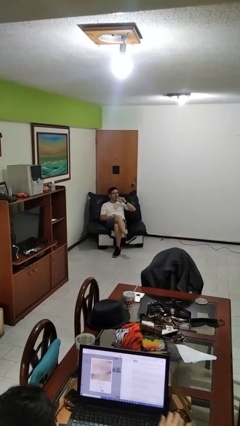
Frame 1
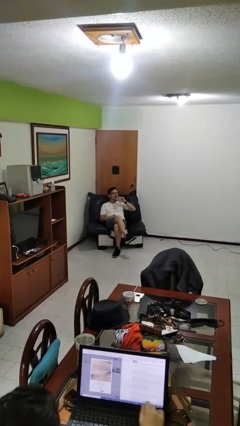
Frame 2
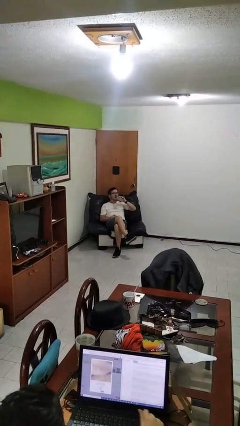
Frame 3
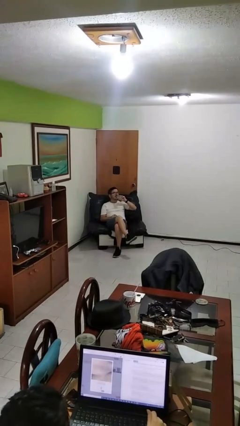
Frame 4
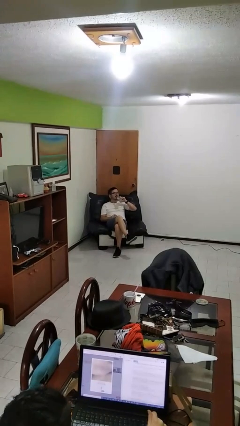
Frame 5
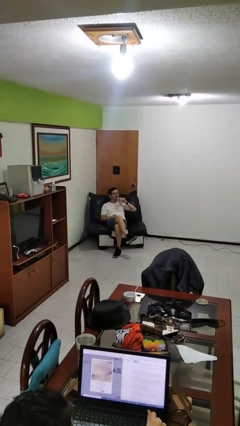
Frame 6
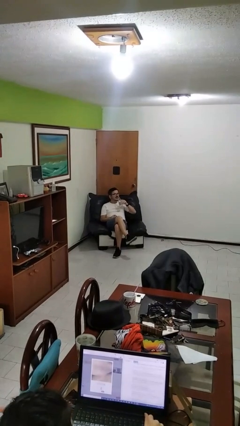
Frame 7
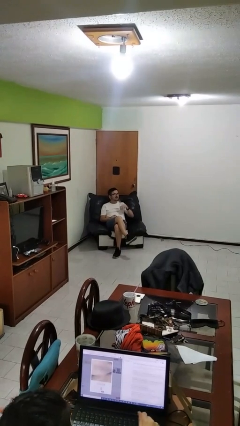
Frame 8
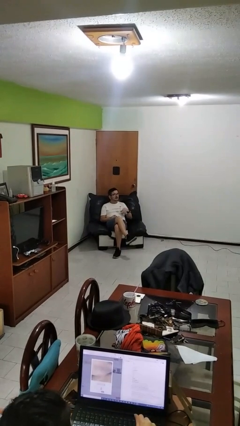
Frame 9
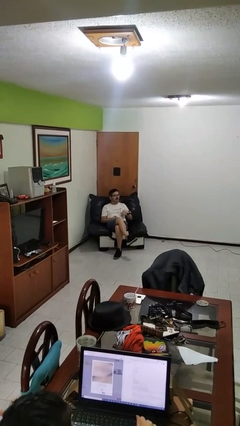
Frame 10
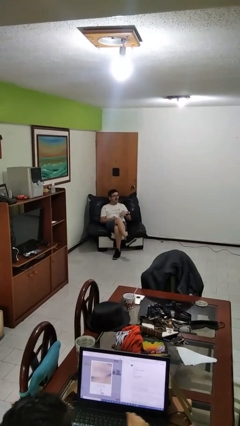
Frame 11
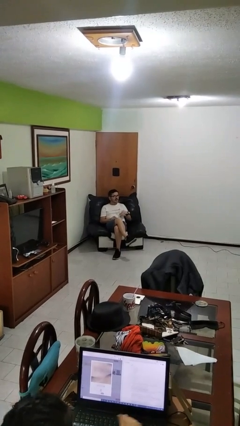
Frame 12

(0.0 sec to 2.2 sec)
person drinks from bottle

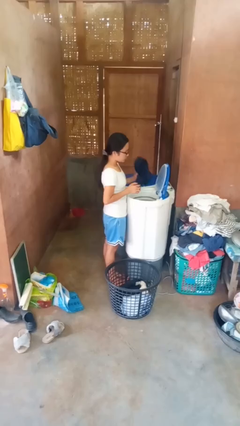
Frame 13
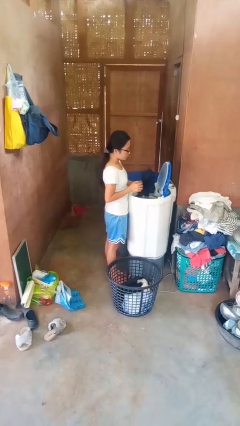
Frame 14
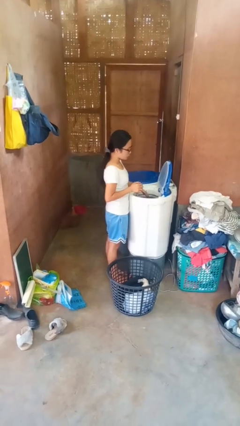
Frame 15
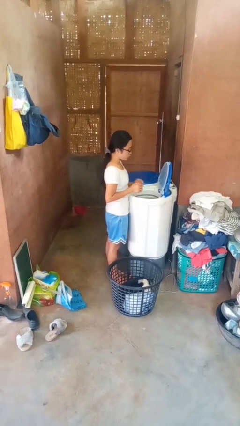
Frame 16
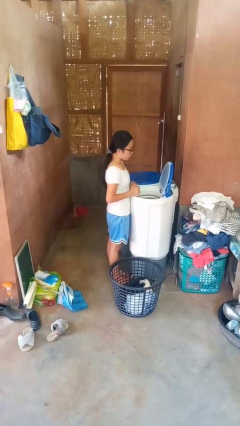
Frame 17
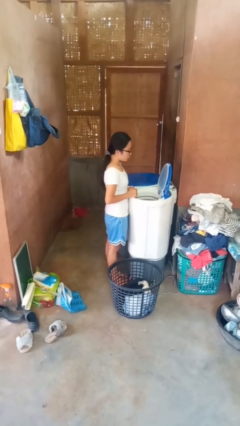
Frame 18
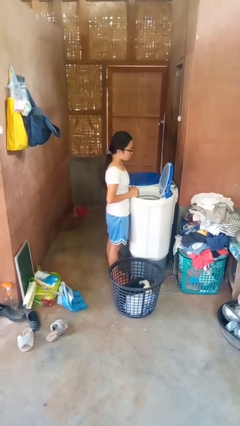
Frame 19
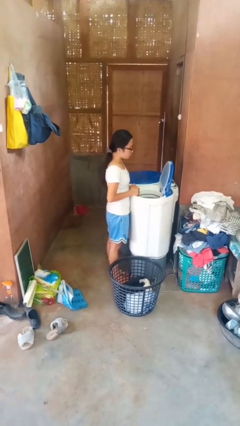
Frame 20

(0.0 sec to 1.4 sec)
person loads dryer

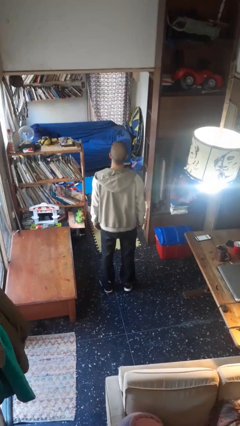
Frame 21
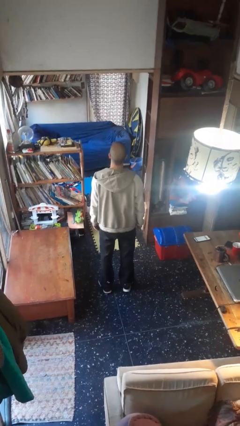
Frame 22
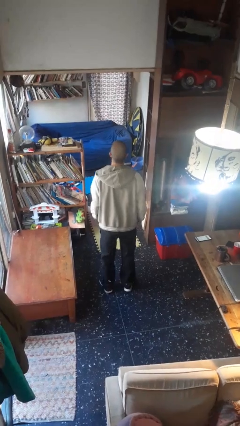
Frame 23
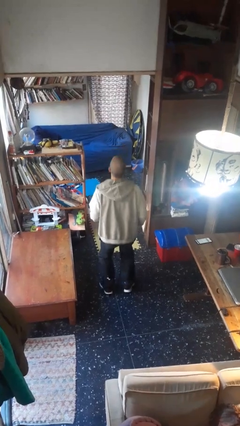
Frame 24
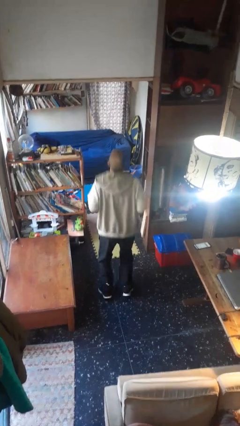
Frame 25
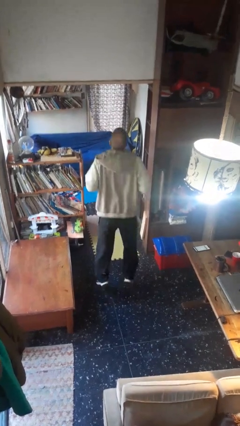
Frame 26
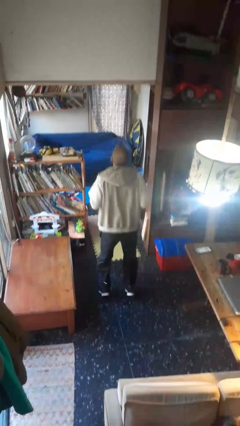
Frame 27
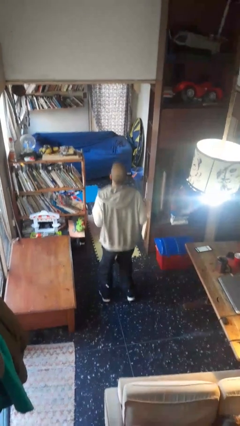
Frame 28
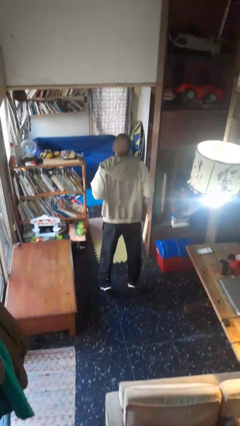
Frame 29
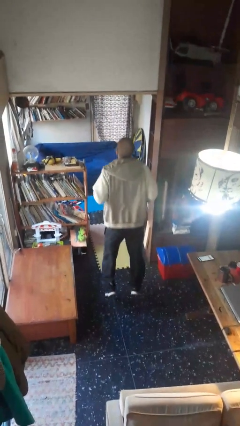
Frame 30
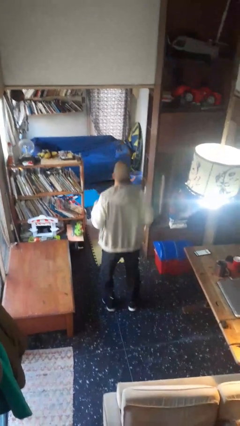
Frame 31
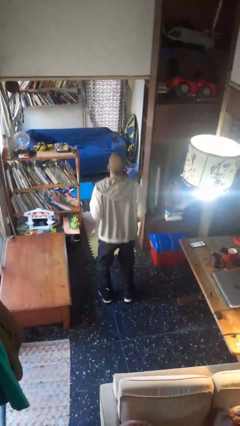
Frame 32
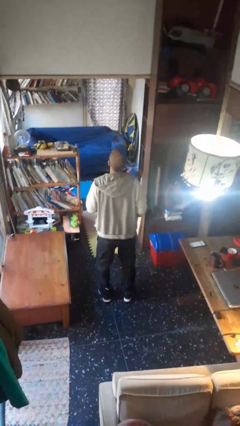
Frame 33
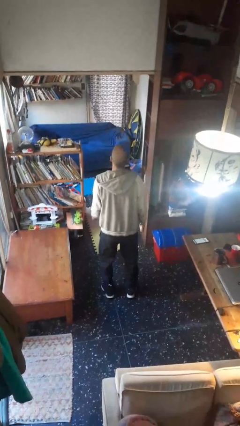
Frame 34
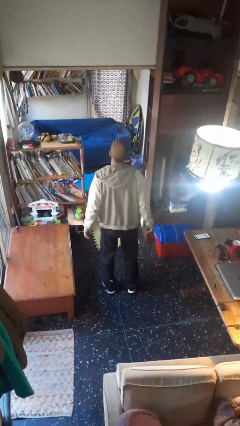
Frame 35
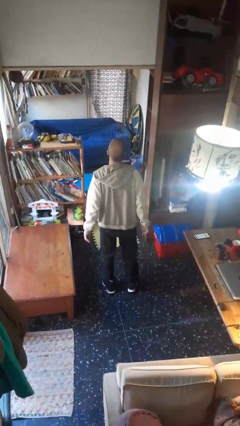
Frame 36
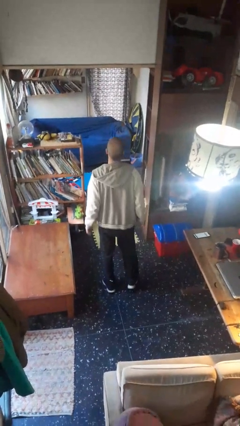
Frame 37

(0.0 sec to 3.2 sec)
person jumps

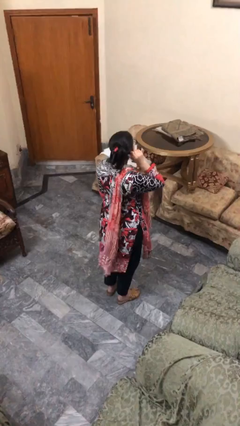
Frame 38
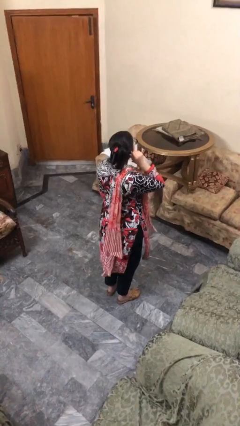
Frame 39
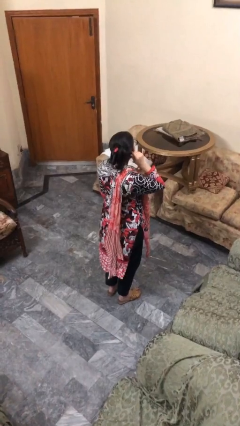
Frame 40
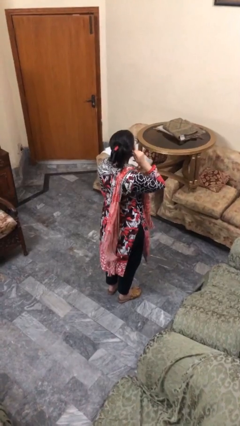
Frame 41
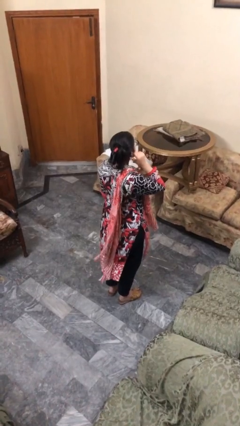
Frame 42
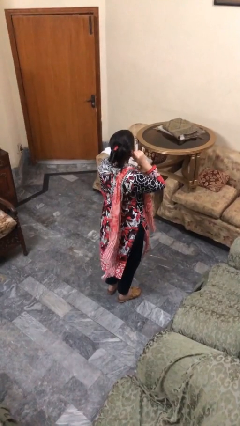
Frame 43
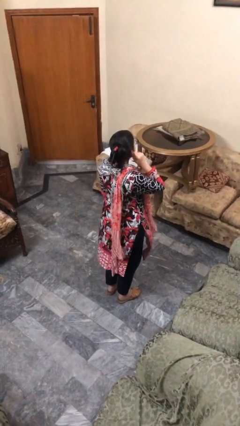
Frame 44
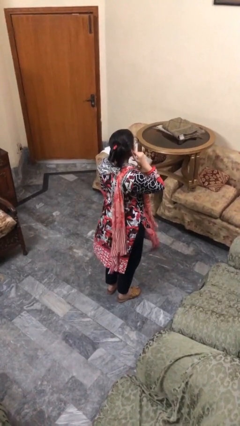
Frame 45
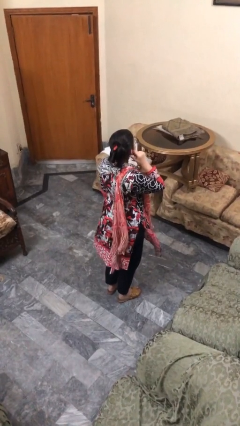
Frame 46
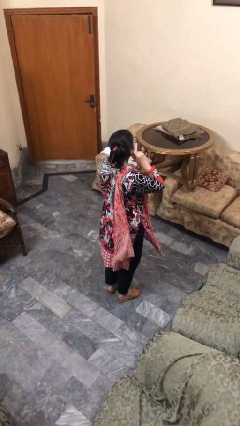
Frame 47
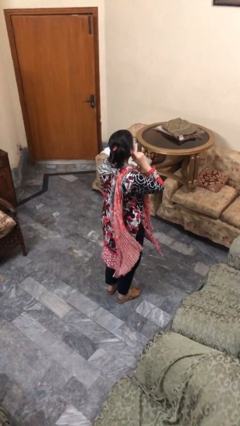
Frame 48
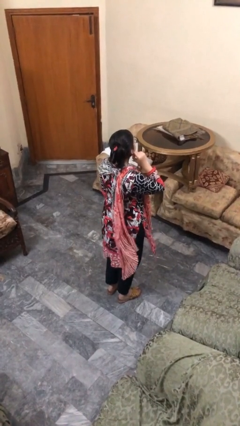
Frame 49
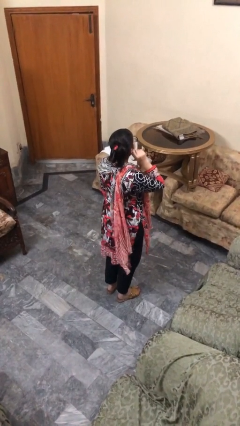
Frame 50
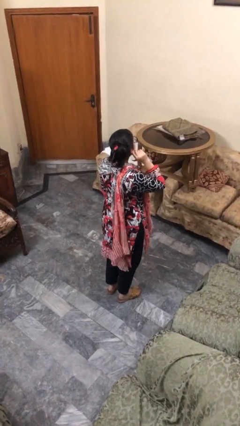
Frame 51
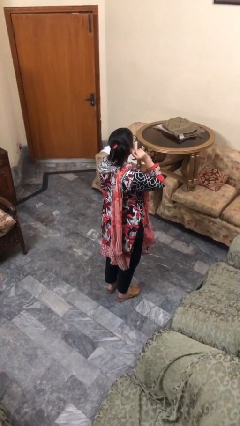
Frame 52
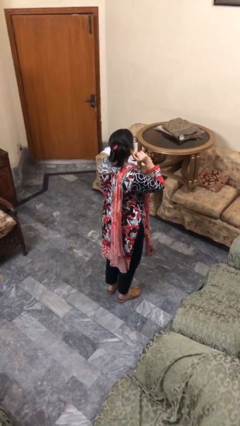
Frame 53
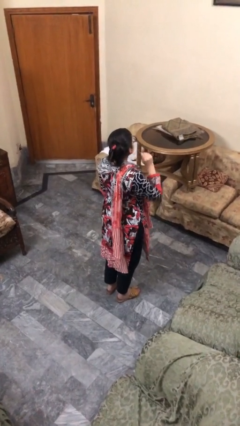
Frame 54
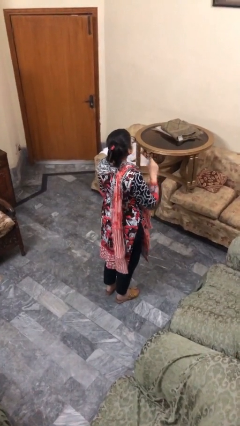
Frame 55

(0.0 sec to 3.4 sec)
person touches earlobe

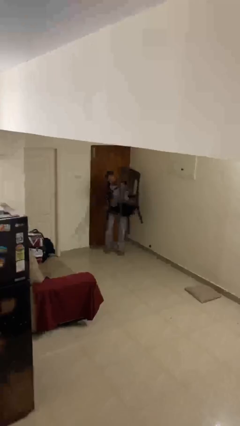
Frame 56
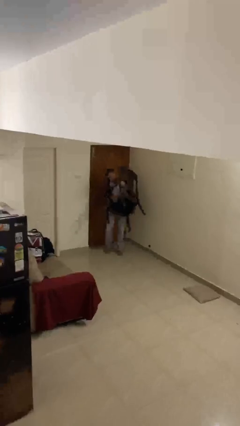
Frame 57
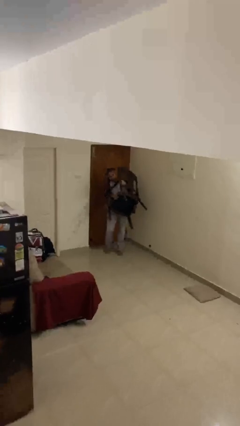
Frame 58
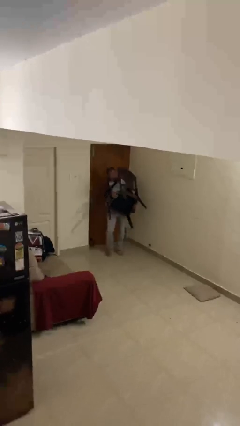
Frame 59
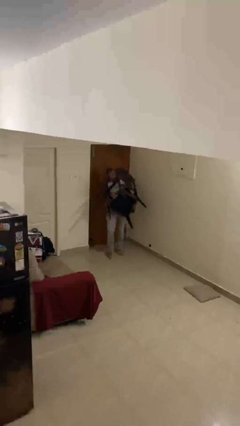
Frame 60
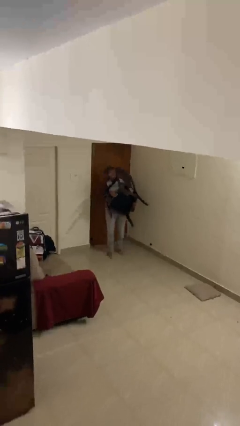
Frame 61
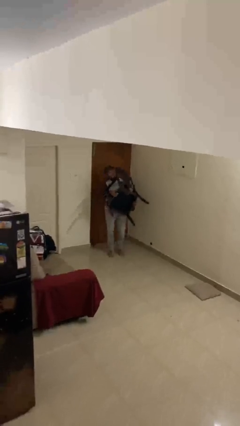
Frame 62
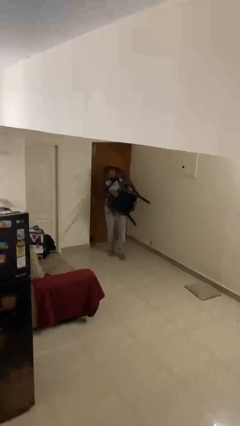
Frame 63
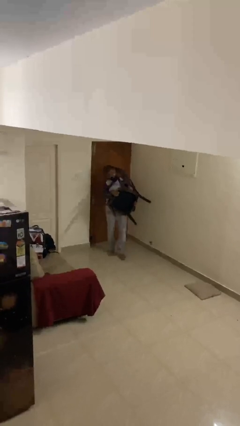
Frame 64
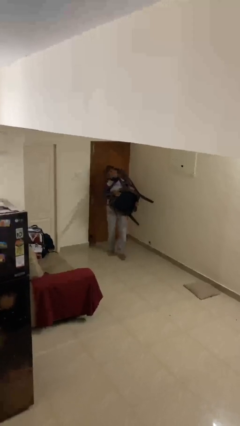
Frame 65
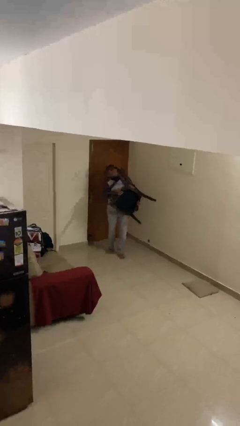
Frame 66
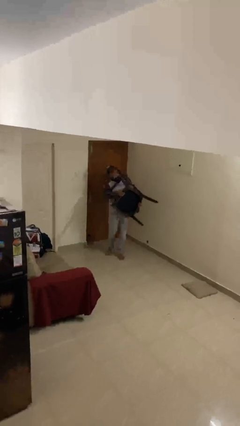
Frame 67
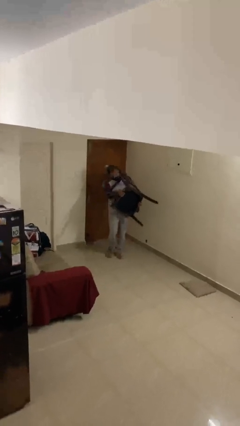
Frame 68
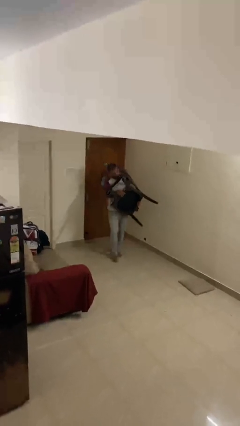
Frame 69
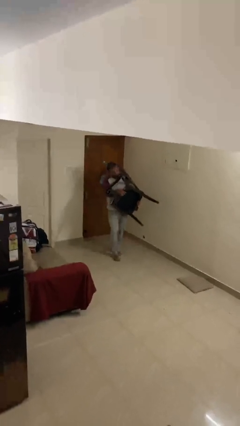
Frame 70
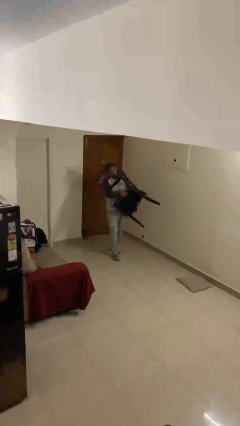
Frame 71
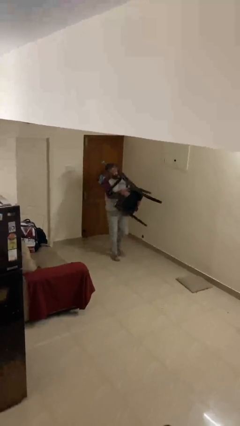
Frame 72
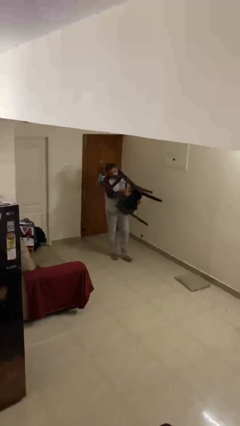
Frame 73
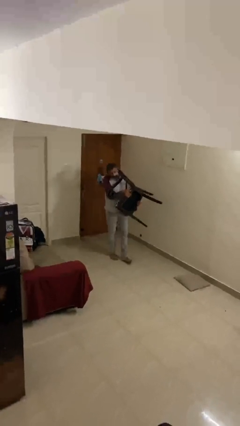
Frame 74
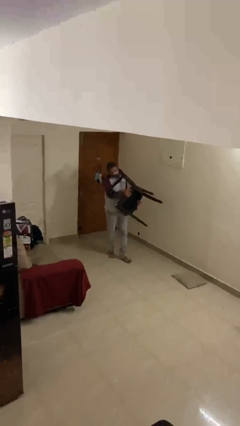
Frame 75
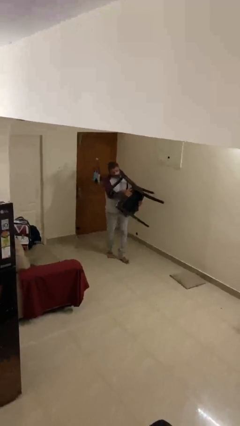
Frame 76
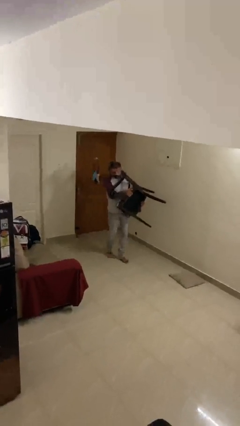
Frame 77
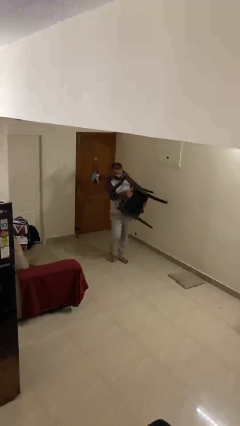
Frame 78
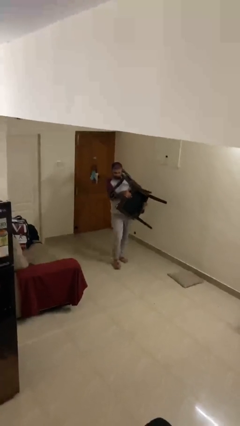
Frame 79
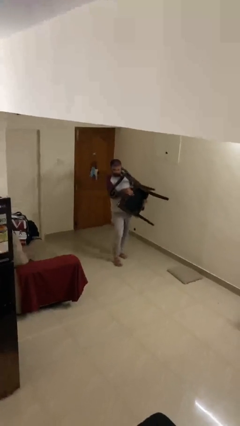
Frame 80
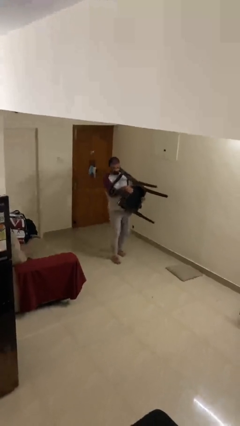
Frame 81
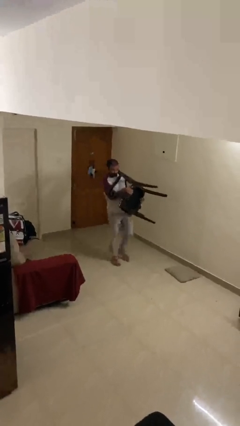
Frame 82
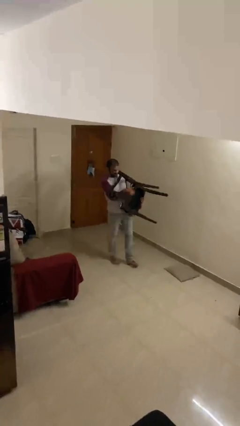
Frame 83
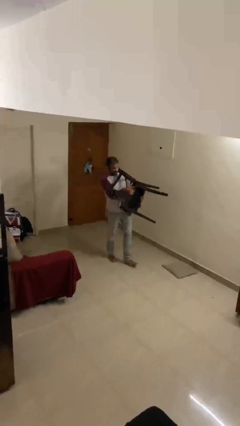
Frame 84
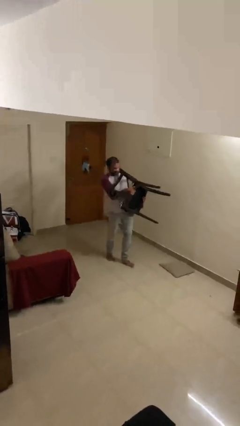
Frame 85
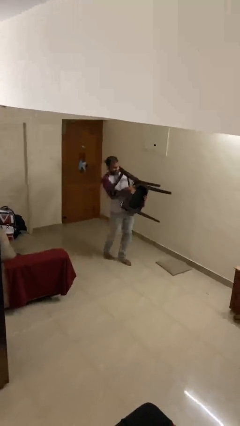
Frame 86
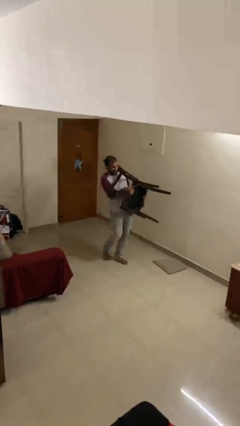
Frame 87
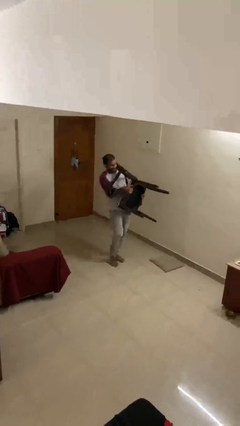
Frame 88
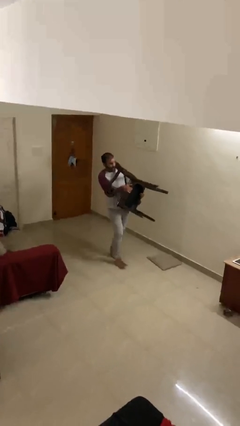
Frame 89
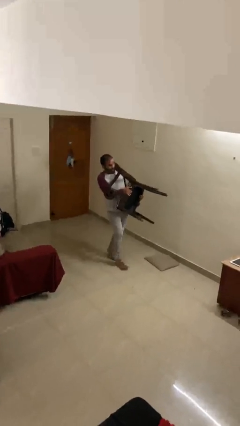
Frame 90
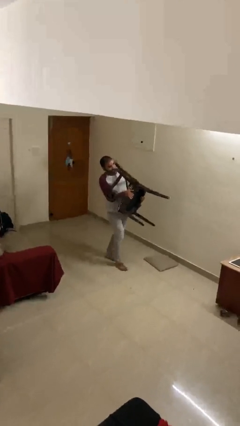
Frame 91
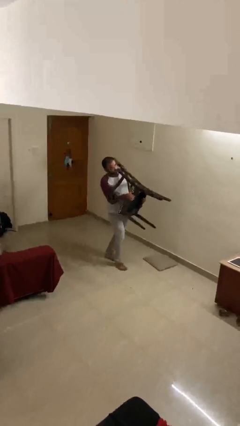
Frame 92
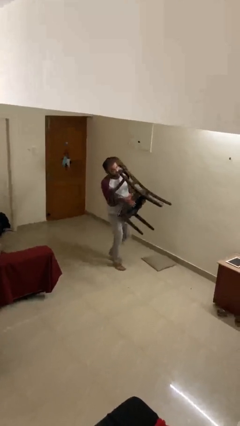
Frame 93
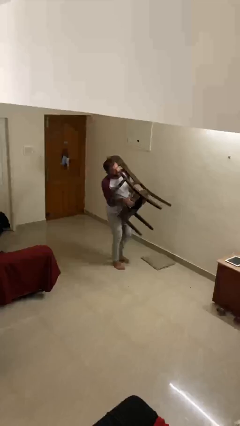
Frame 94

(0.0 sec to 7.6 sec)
person carries heavy object
